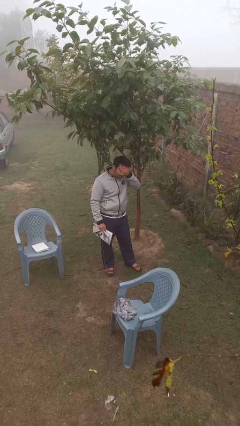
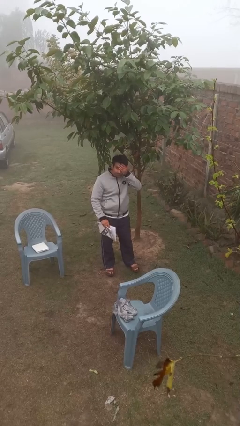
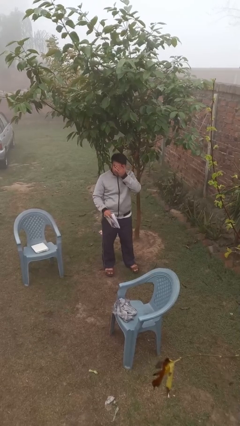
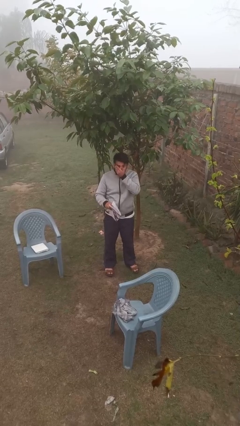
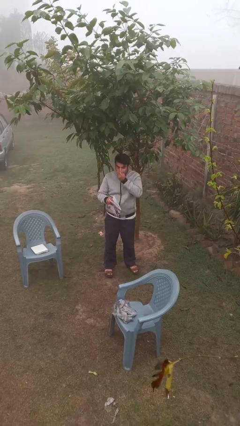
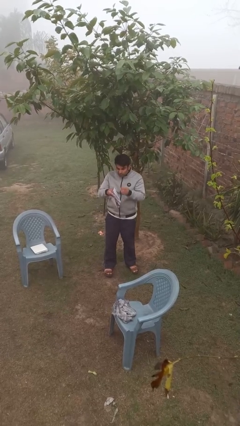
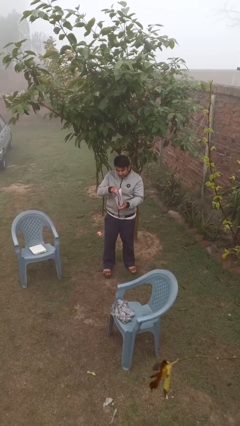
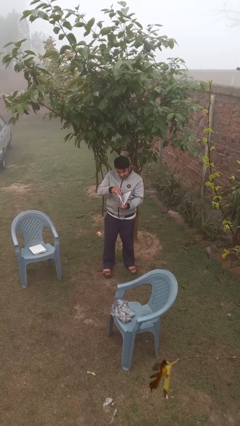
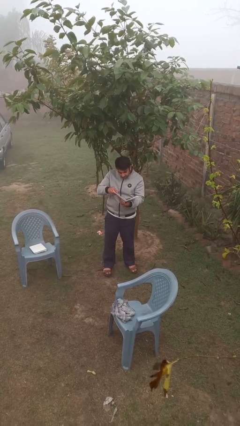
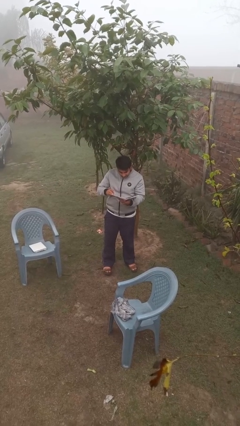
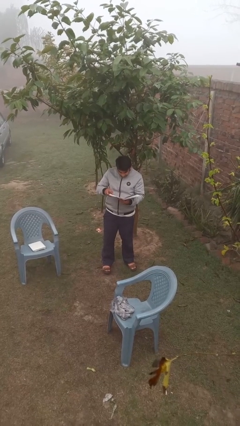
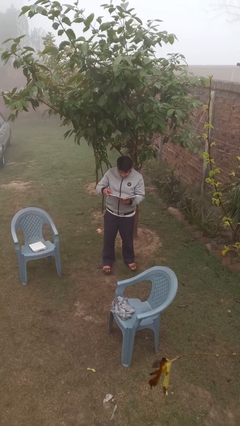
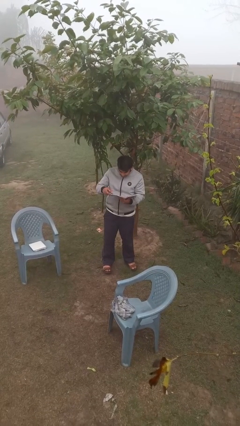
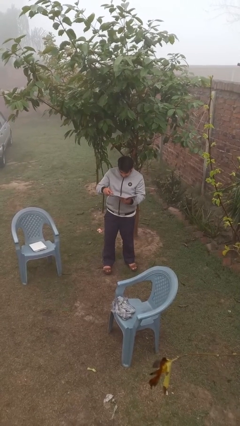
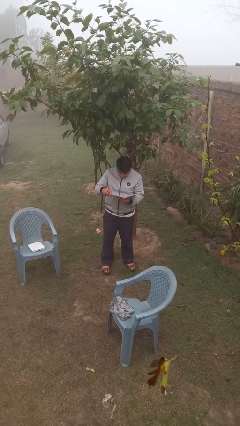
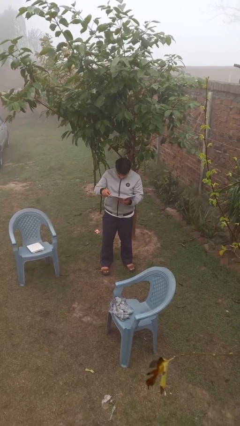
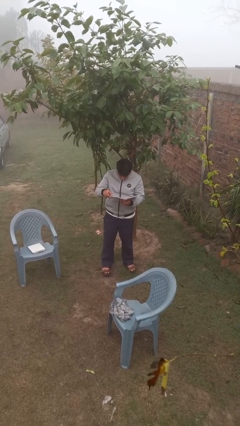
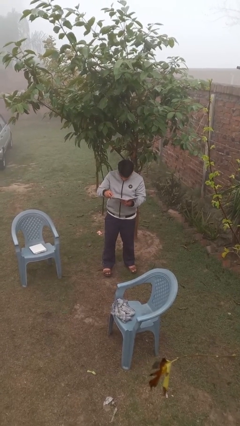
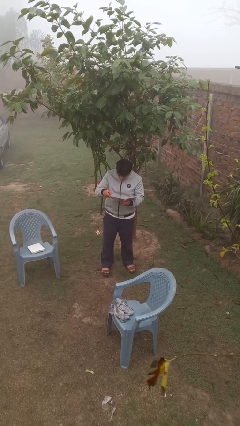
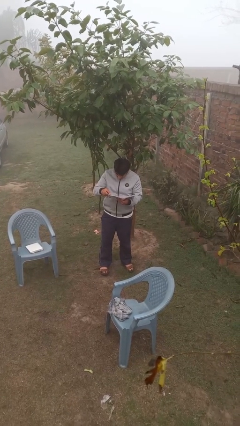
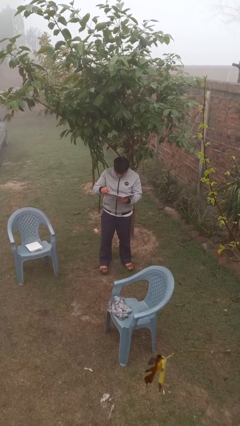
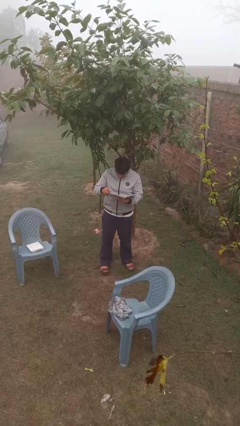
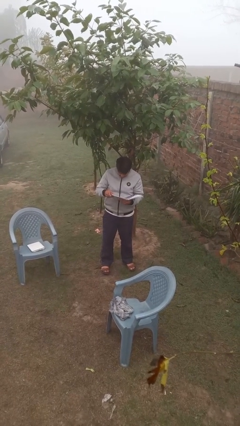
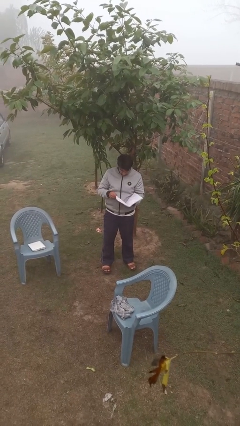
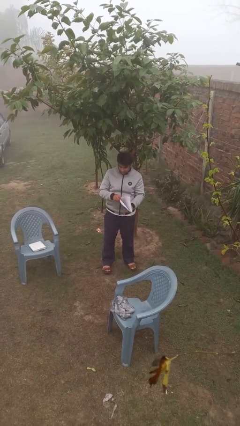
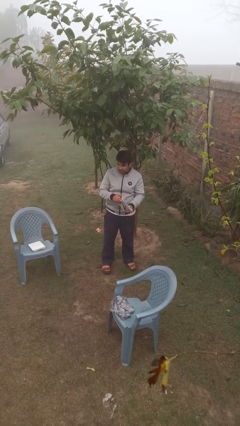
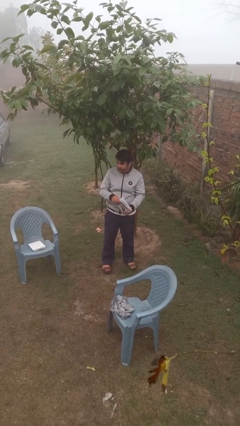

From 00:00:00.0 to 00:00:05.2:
person reads document

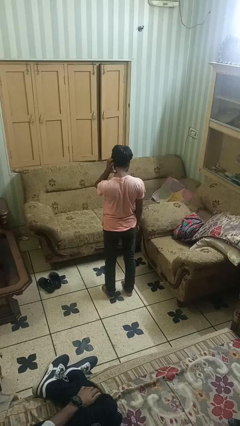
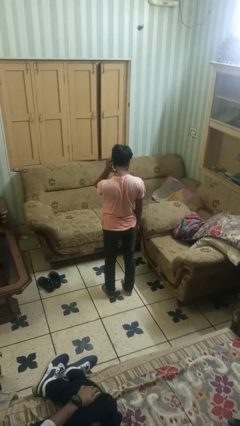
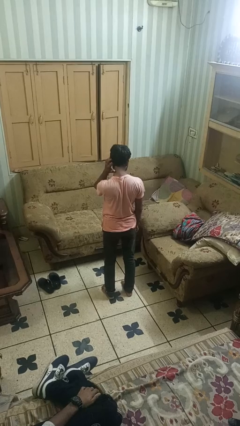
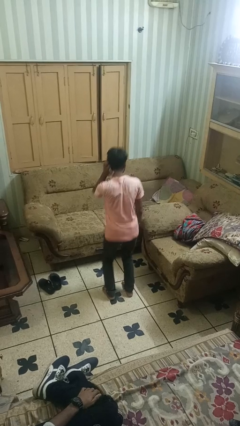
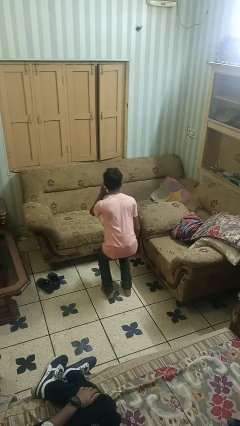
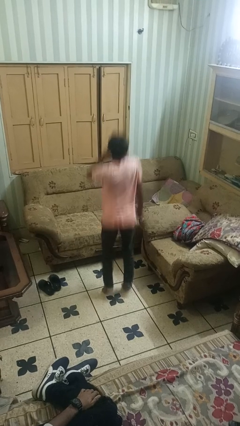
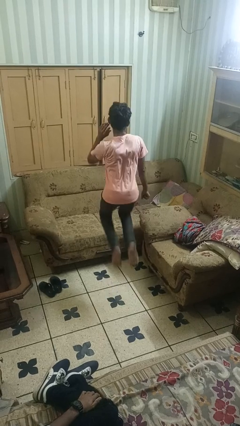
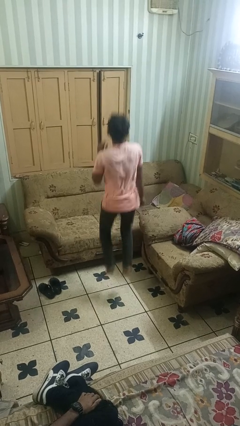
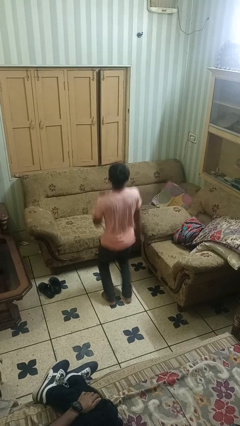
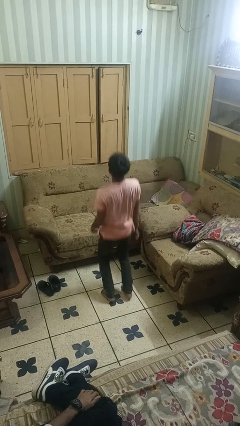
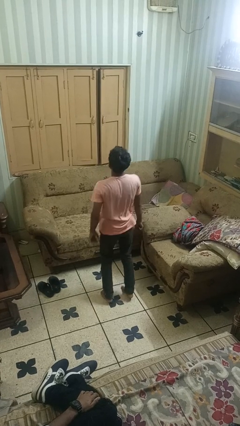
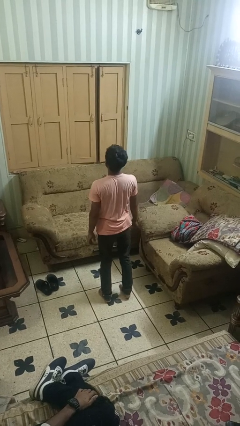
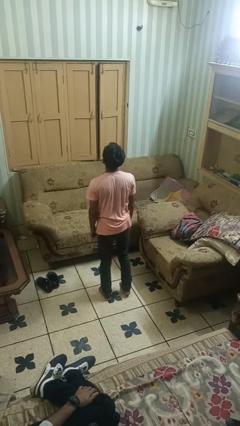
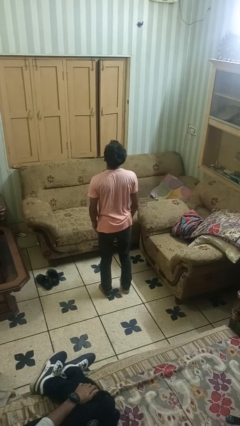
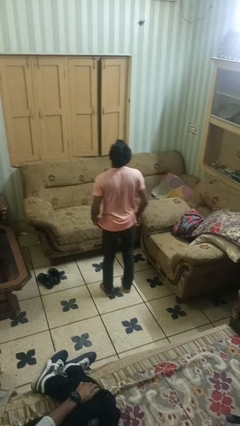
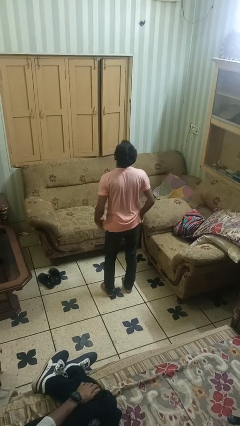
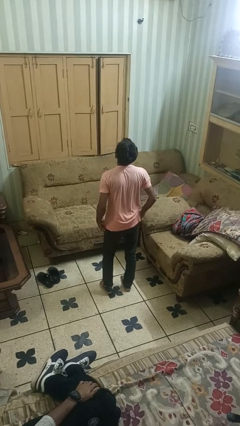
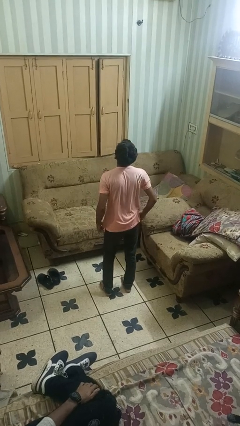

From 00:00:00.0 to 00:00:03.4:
person jumps

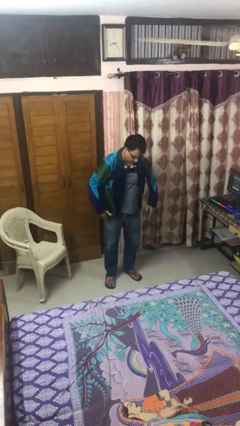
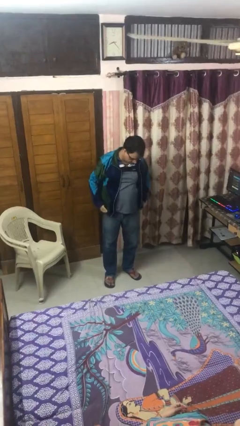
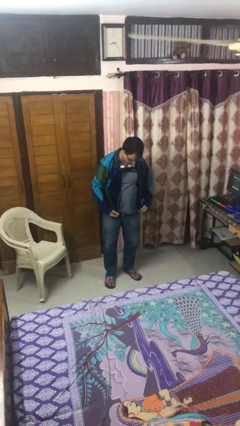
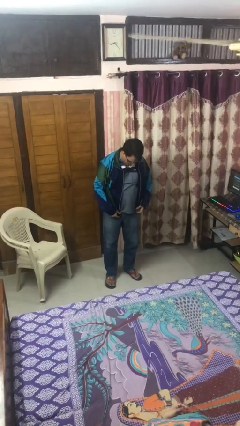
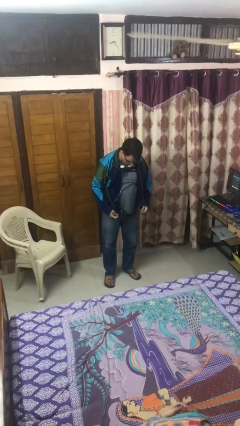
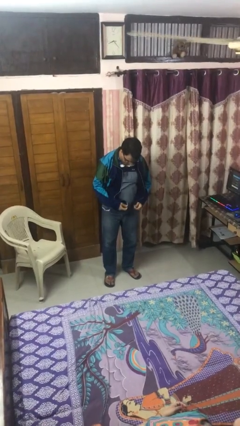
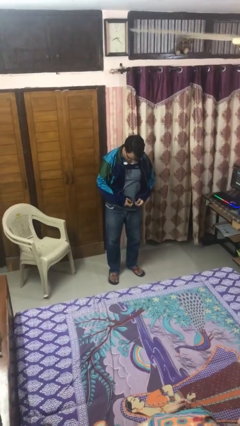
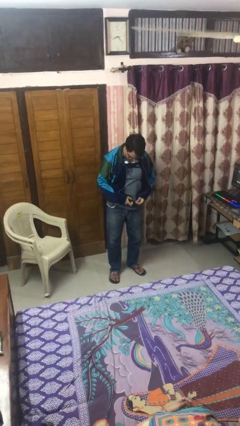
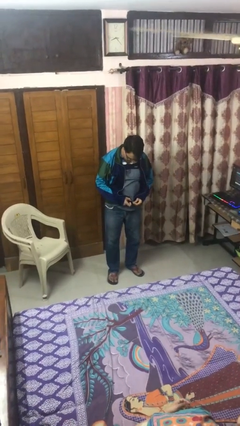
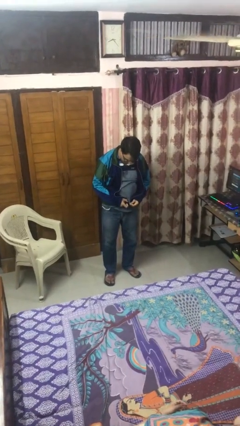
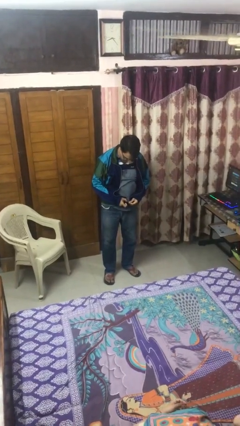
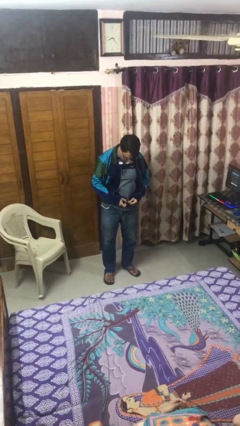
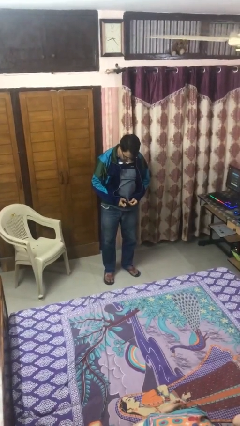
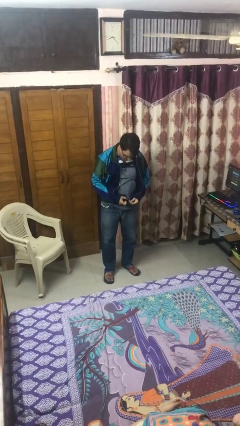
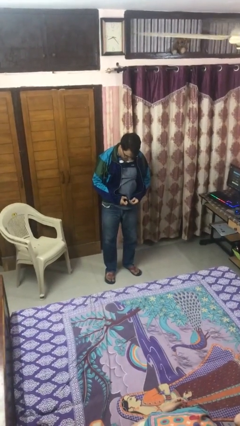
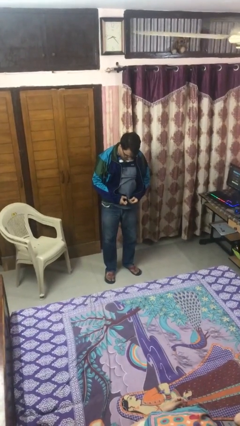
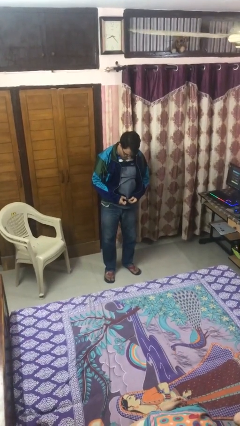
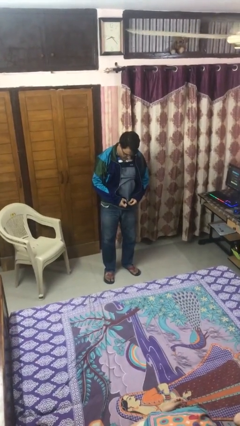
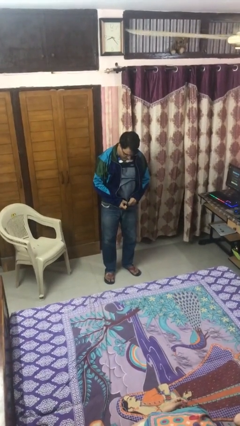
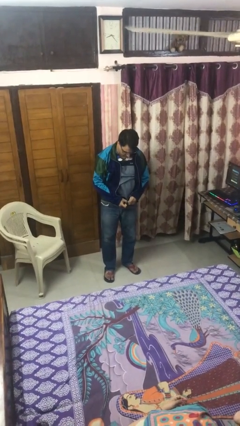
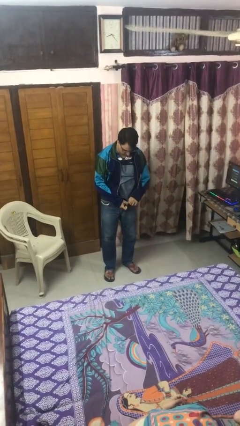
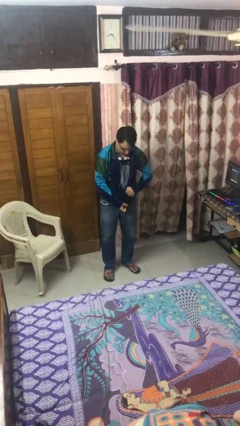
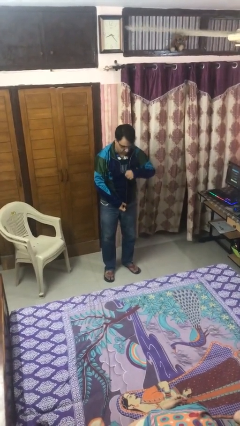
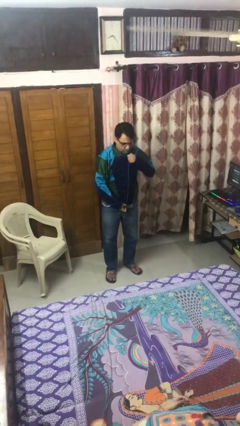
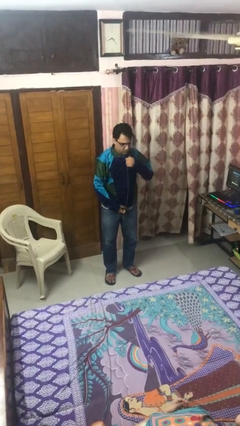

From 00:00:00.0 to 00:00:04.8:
person zips up jacket

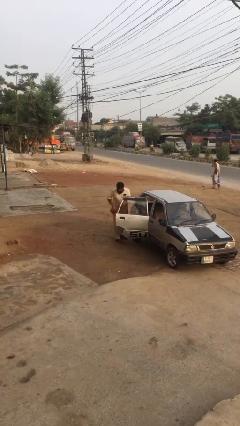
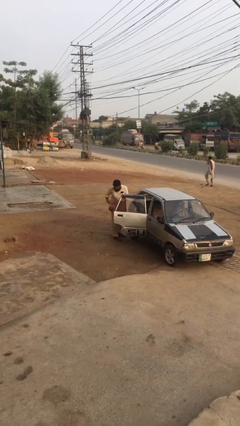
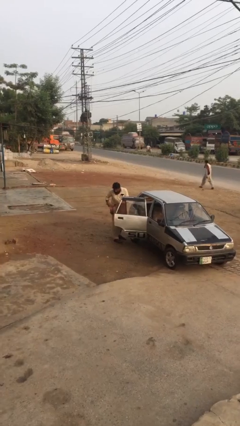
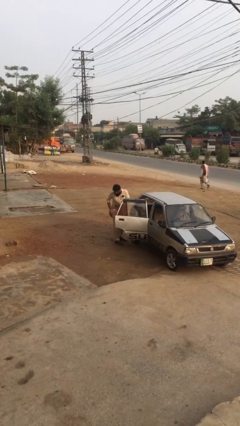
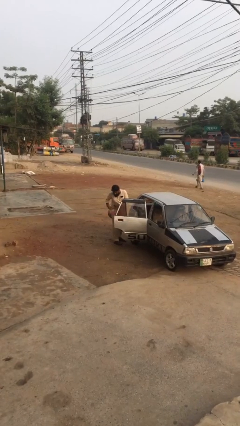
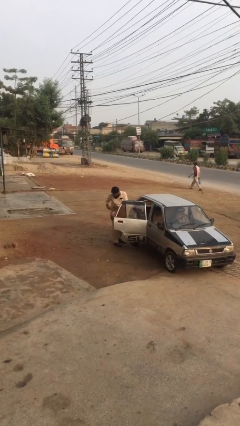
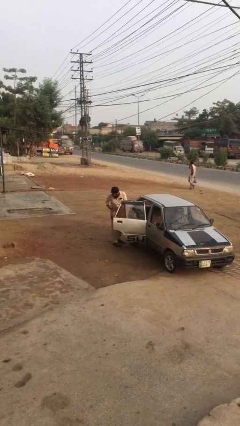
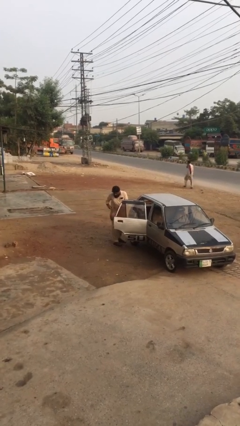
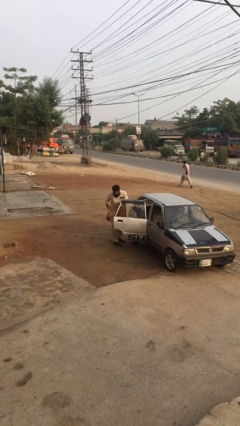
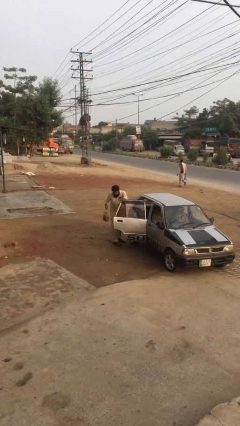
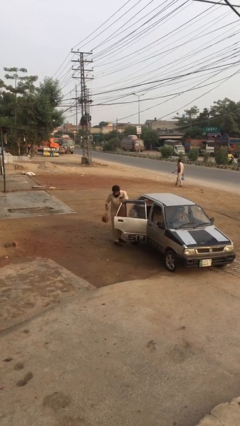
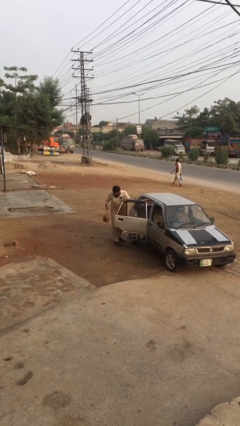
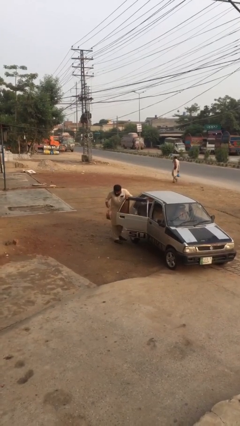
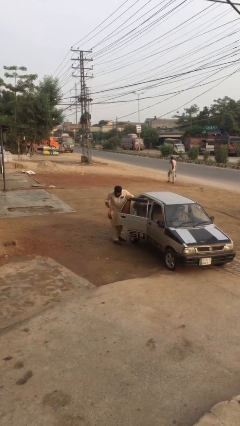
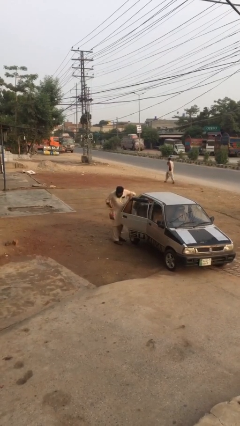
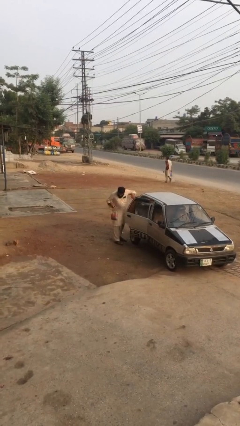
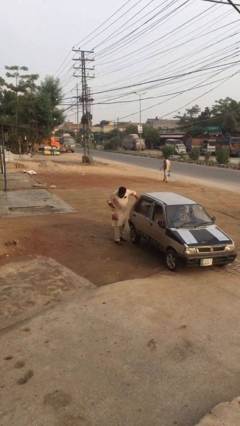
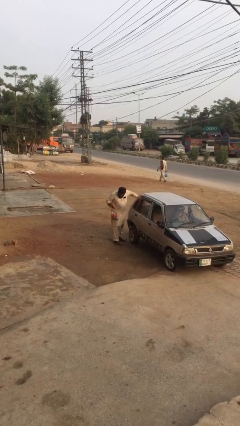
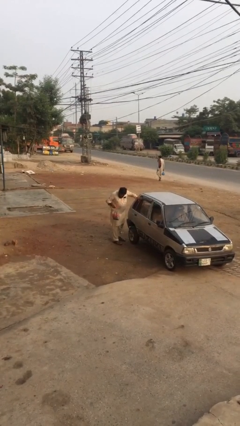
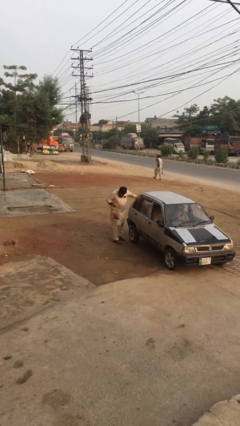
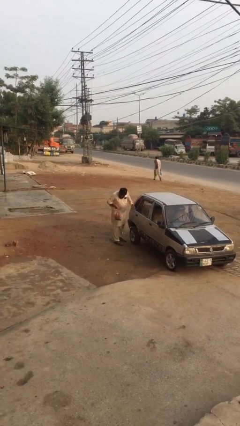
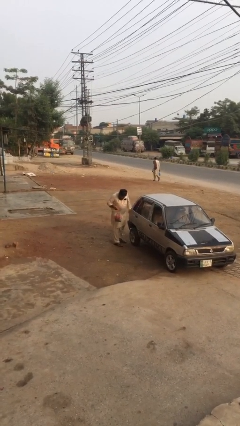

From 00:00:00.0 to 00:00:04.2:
person closes car door
